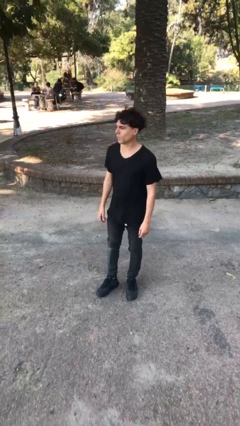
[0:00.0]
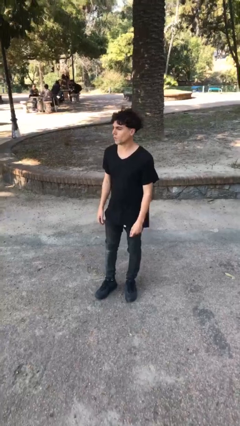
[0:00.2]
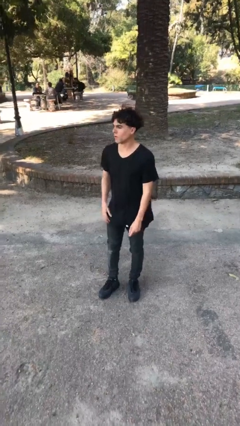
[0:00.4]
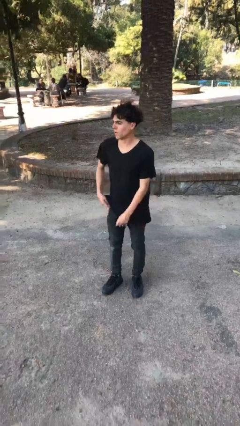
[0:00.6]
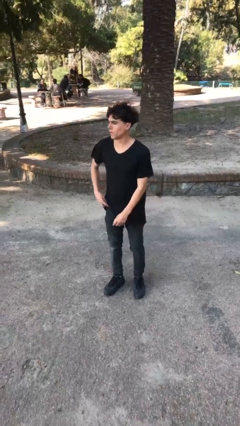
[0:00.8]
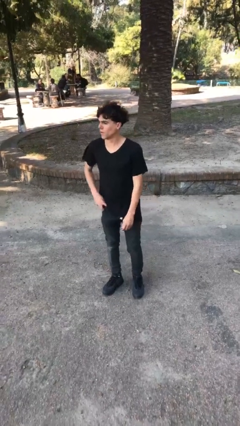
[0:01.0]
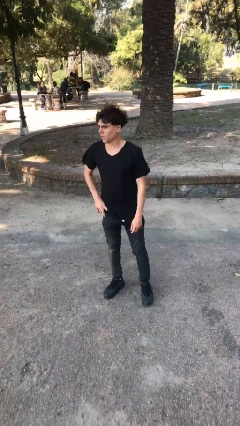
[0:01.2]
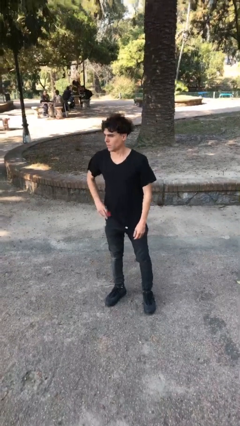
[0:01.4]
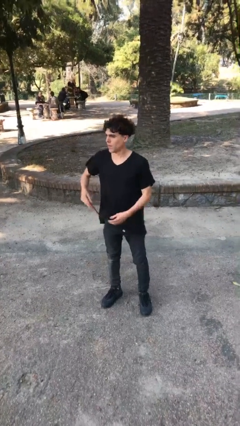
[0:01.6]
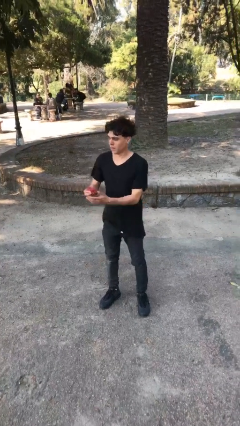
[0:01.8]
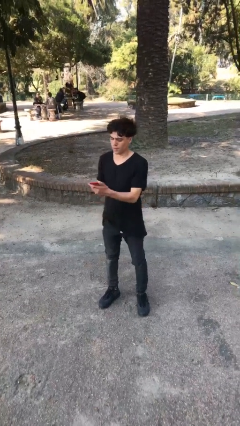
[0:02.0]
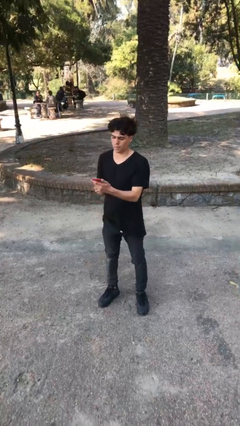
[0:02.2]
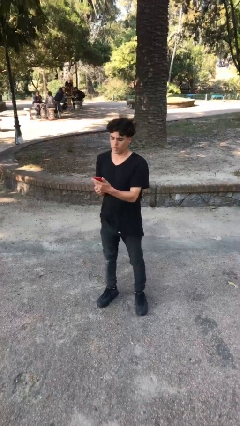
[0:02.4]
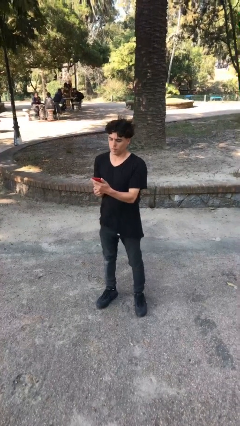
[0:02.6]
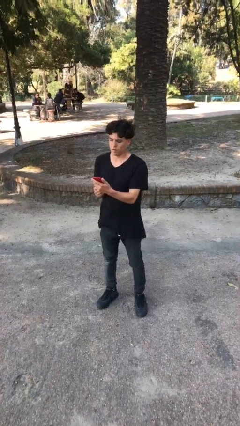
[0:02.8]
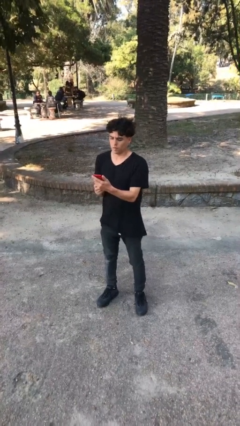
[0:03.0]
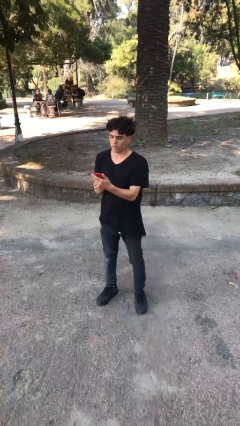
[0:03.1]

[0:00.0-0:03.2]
person takes phone from pocket

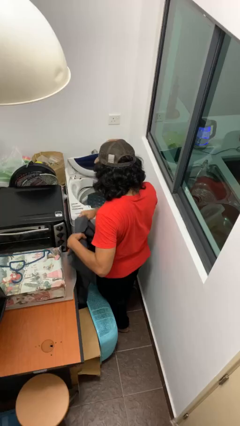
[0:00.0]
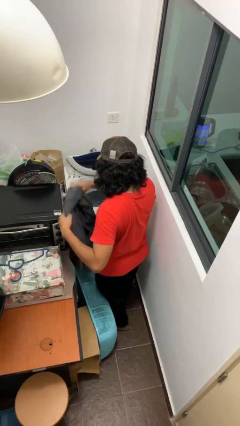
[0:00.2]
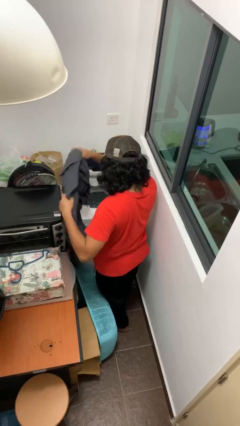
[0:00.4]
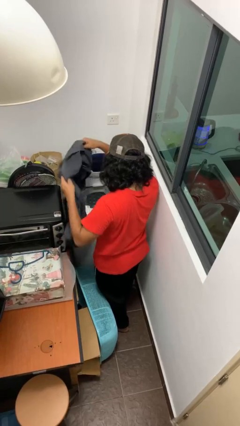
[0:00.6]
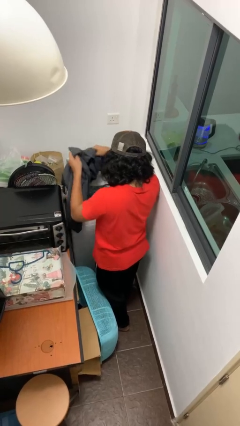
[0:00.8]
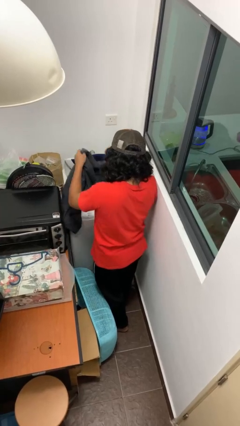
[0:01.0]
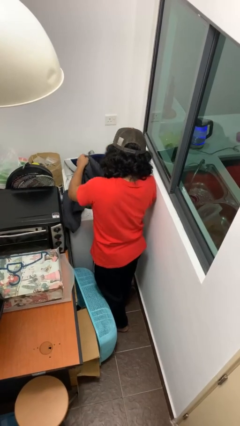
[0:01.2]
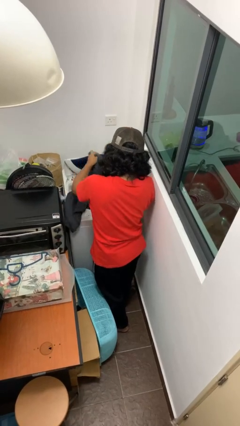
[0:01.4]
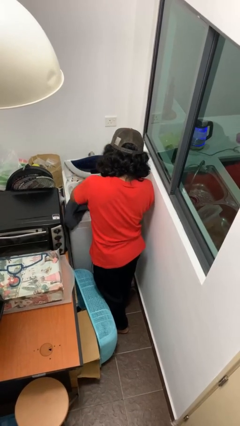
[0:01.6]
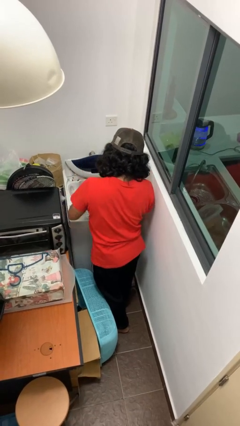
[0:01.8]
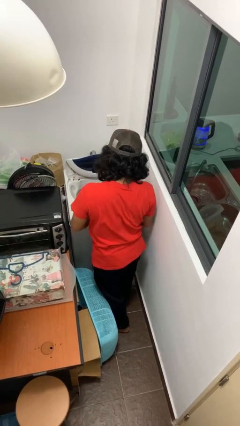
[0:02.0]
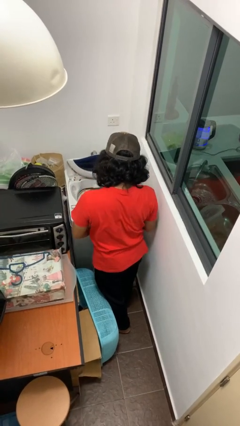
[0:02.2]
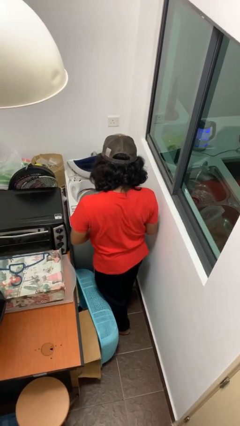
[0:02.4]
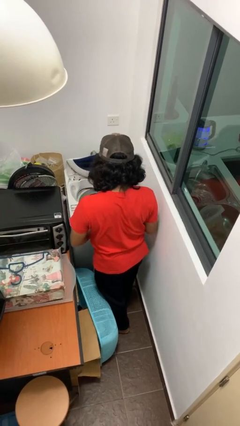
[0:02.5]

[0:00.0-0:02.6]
person loads clotheswasher

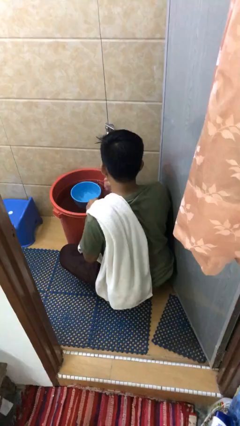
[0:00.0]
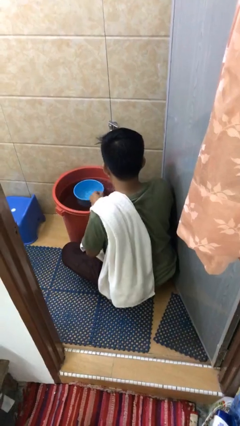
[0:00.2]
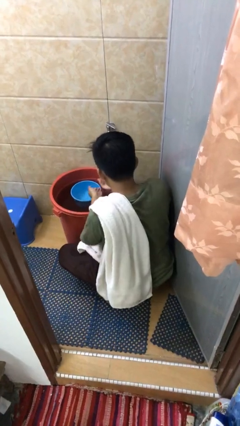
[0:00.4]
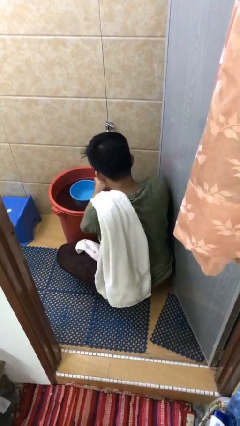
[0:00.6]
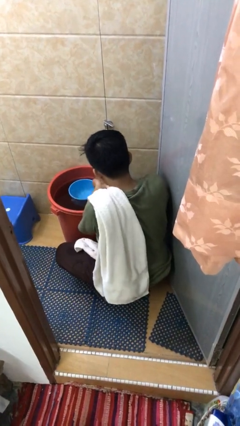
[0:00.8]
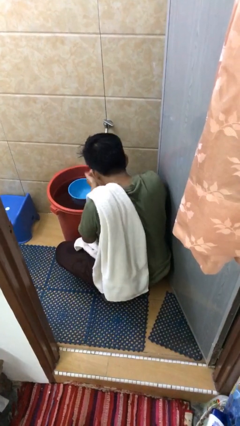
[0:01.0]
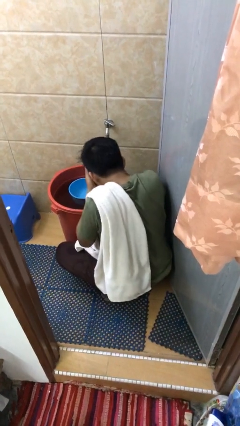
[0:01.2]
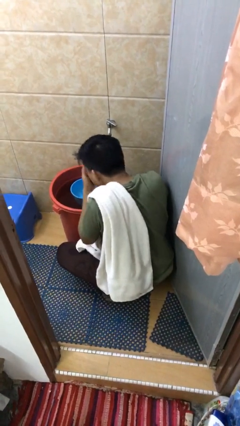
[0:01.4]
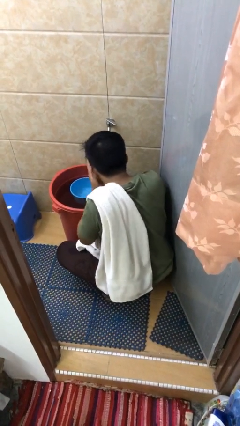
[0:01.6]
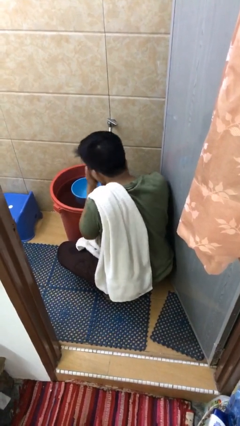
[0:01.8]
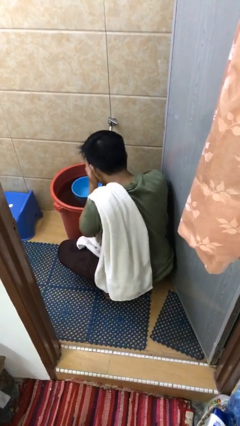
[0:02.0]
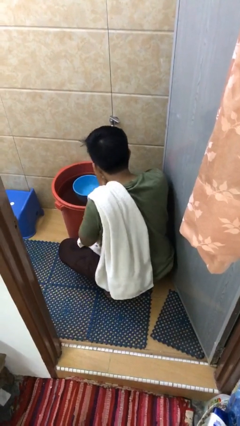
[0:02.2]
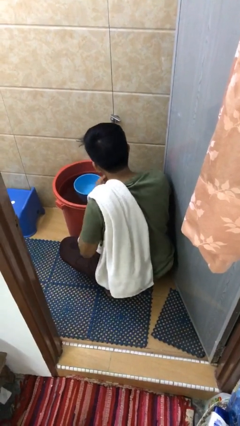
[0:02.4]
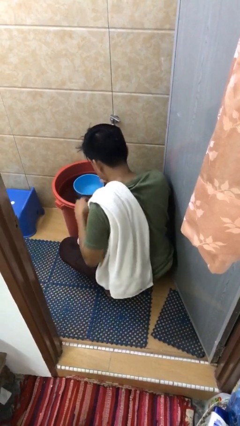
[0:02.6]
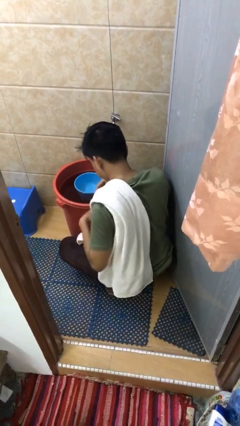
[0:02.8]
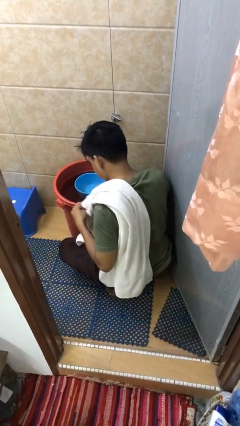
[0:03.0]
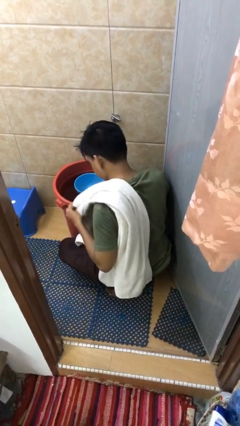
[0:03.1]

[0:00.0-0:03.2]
person washes face

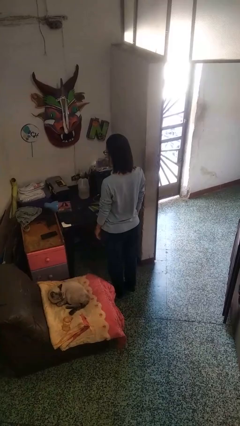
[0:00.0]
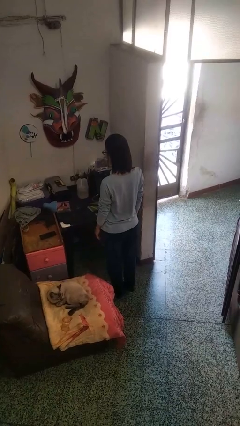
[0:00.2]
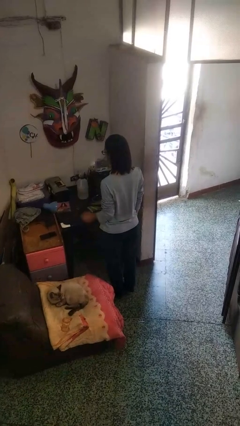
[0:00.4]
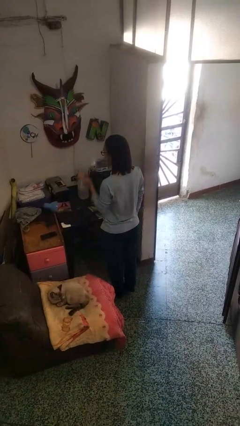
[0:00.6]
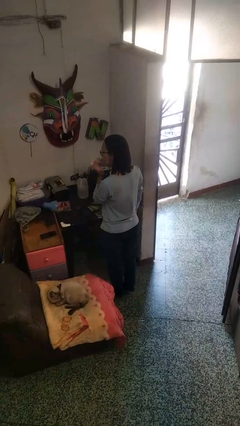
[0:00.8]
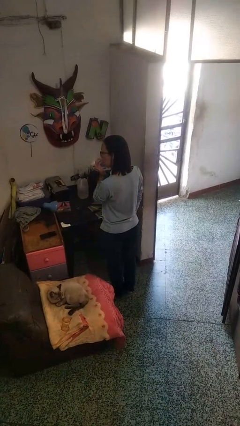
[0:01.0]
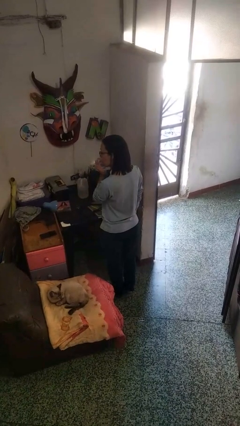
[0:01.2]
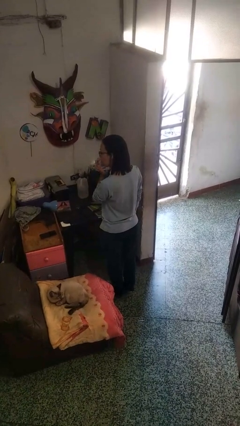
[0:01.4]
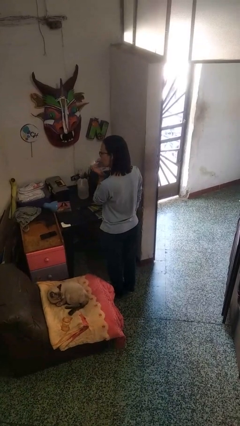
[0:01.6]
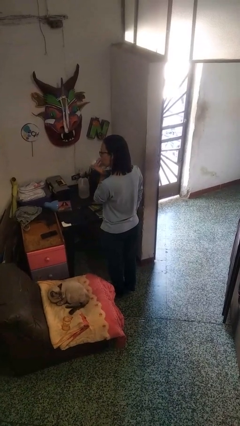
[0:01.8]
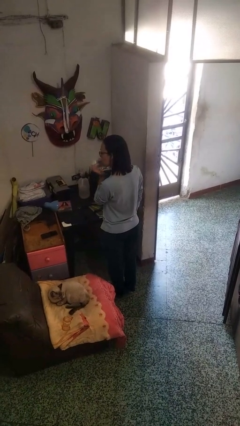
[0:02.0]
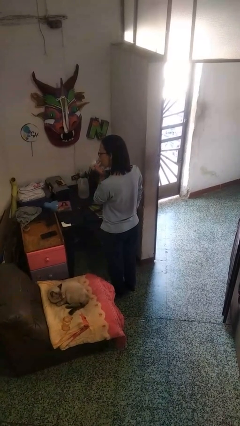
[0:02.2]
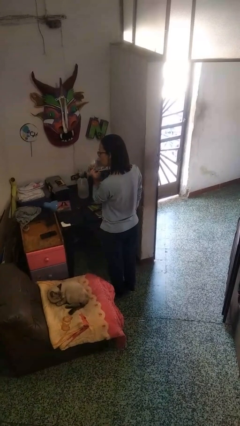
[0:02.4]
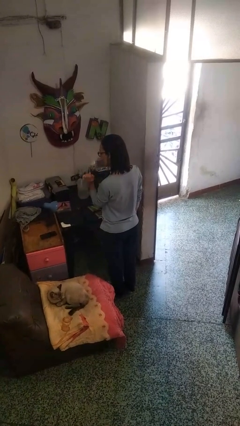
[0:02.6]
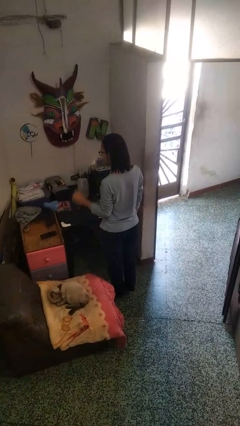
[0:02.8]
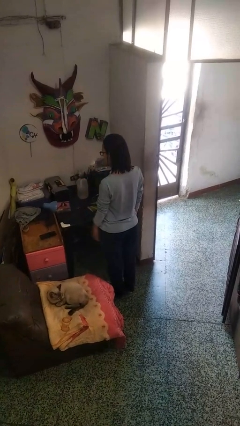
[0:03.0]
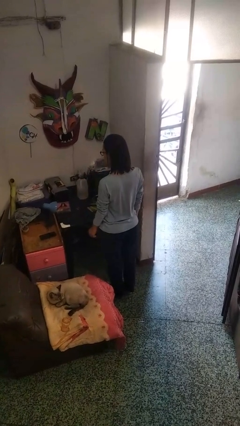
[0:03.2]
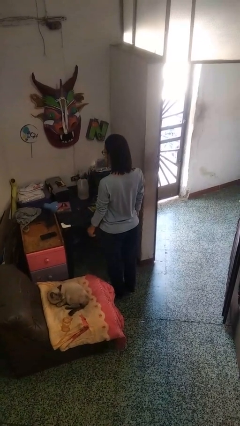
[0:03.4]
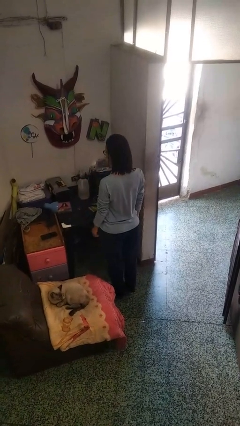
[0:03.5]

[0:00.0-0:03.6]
person licks fingers

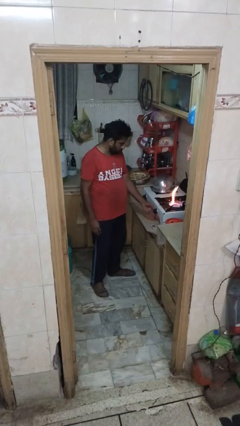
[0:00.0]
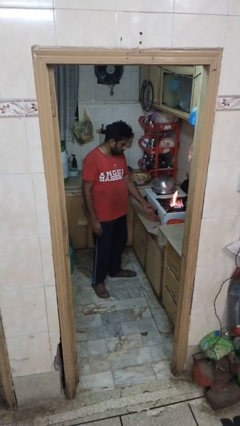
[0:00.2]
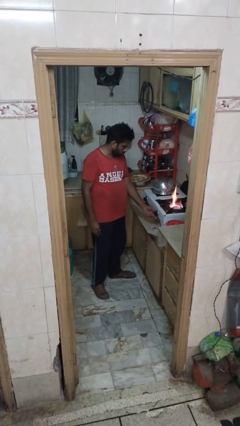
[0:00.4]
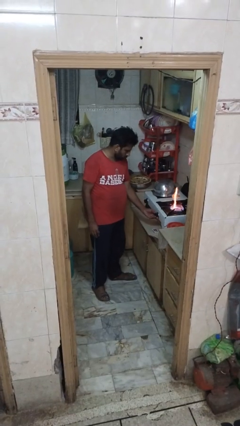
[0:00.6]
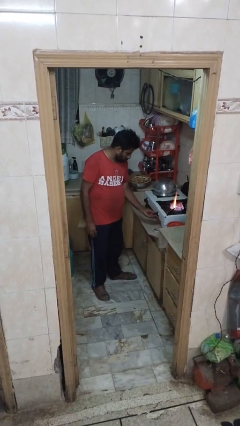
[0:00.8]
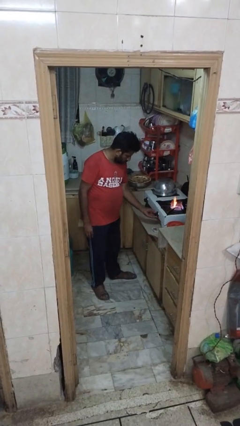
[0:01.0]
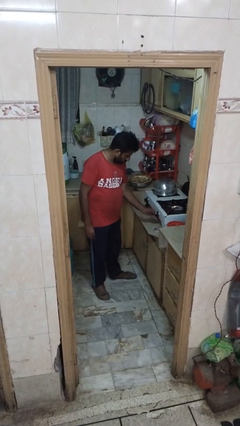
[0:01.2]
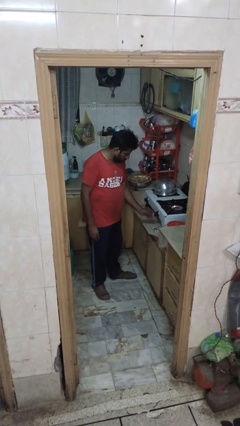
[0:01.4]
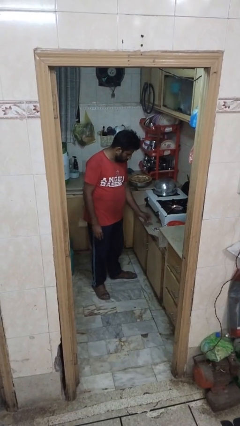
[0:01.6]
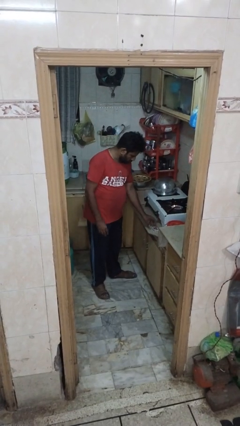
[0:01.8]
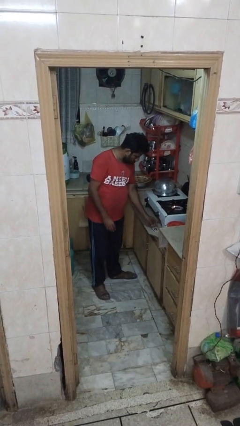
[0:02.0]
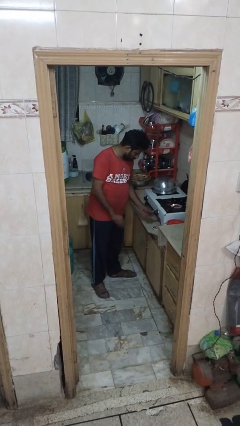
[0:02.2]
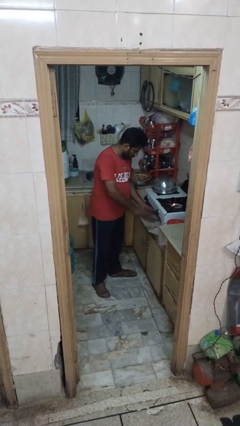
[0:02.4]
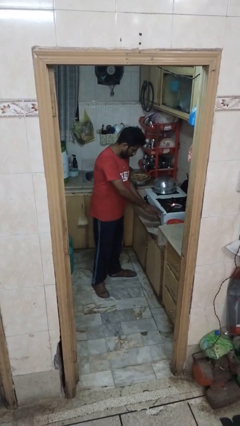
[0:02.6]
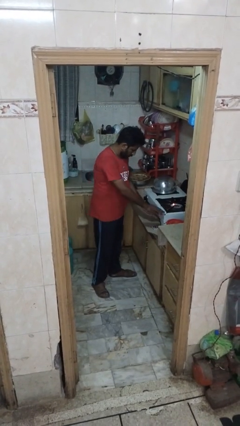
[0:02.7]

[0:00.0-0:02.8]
person turns off stovetop

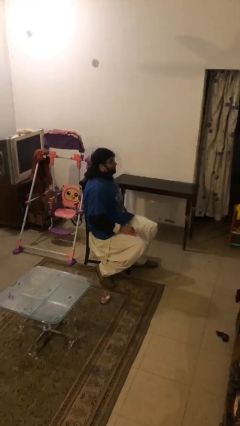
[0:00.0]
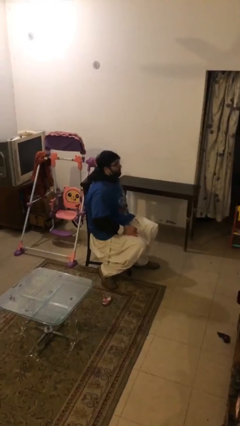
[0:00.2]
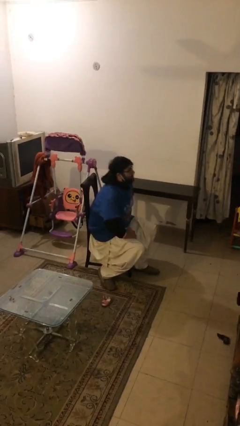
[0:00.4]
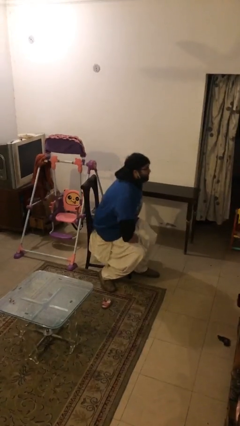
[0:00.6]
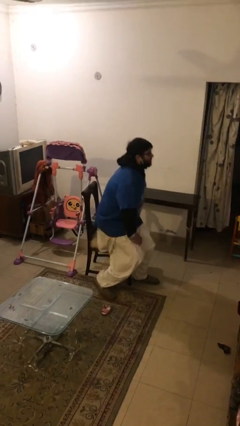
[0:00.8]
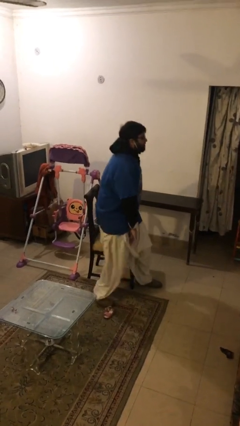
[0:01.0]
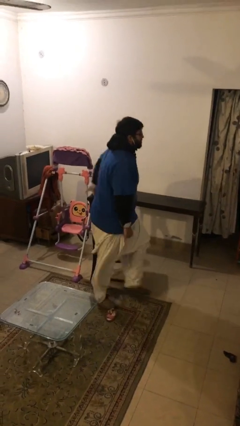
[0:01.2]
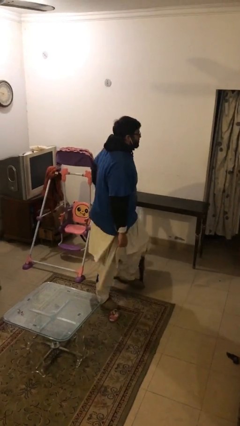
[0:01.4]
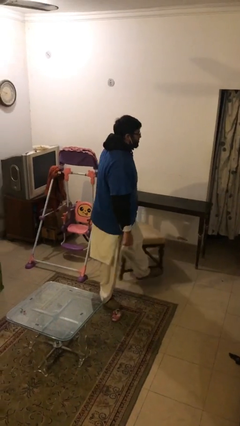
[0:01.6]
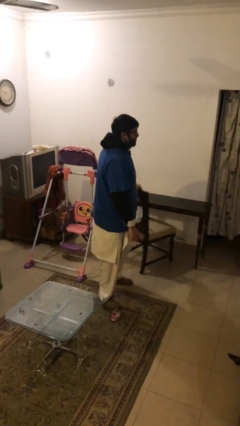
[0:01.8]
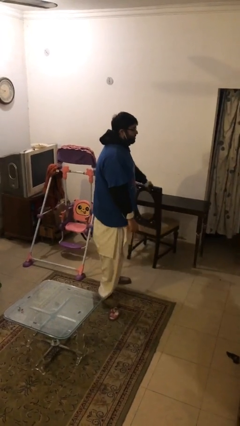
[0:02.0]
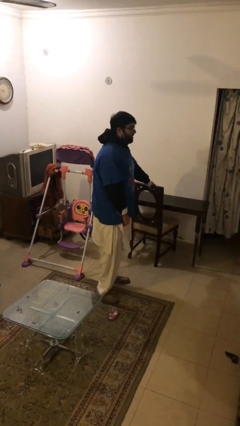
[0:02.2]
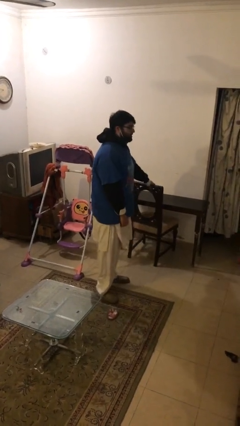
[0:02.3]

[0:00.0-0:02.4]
person stands up
